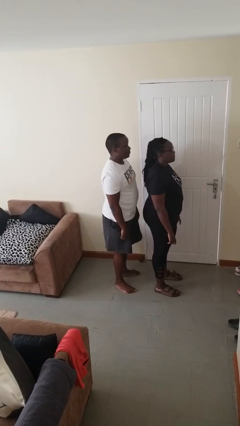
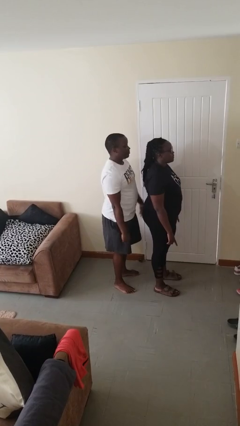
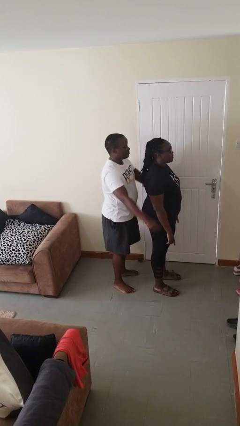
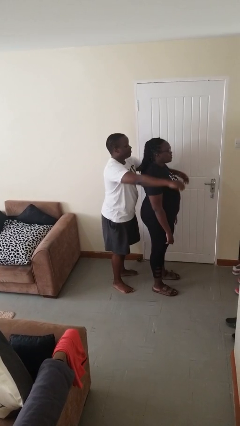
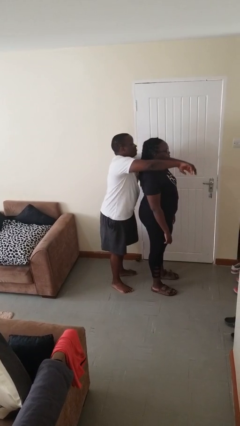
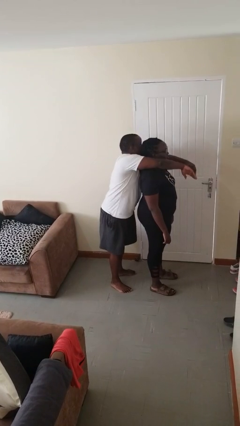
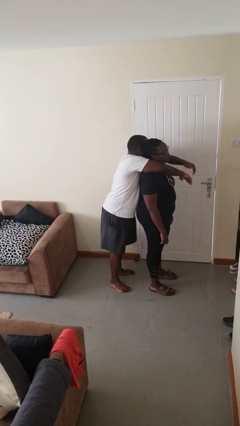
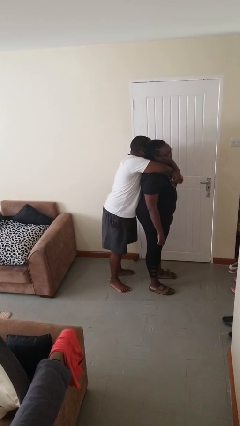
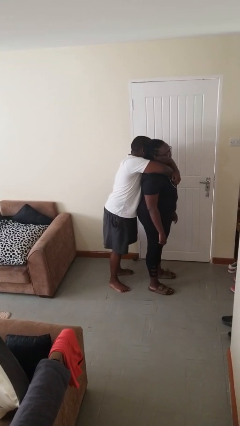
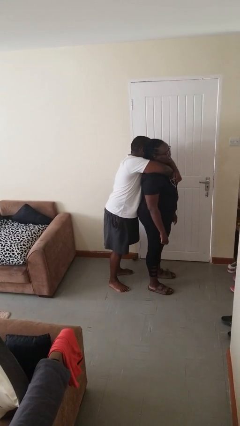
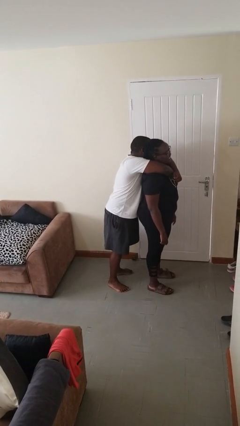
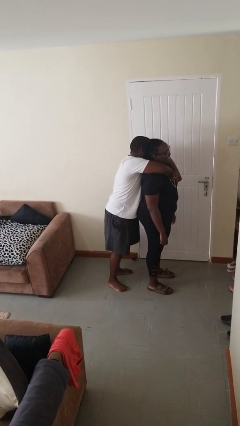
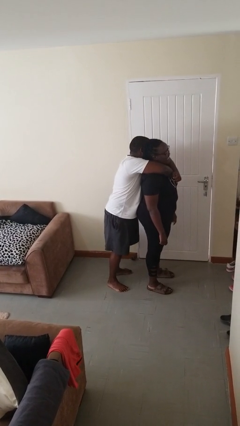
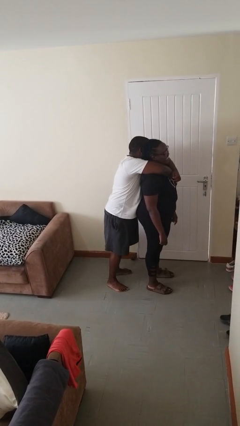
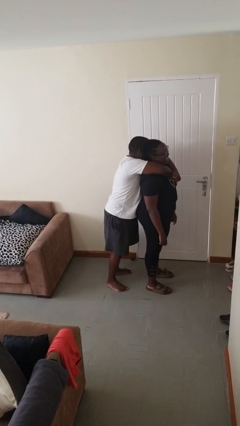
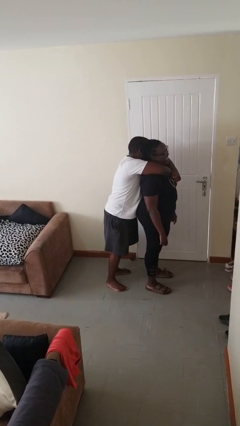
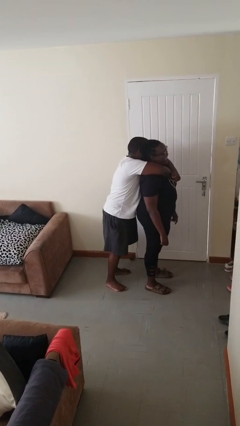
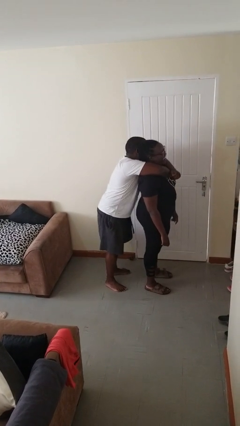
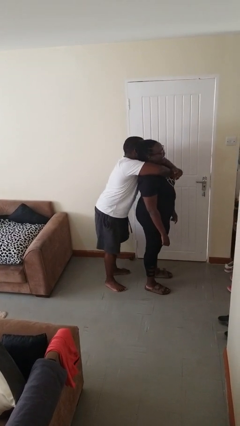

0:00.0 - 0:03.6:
person hugs person from behind

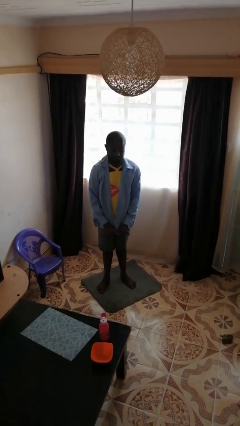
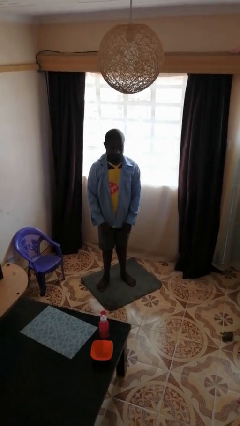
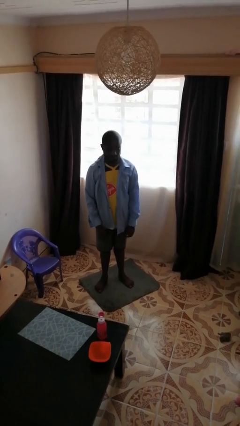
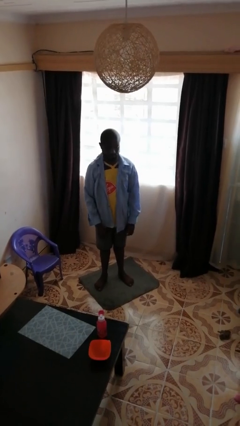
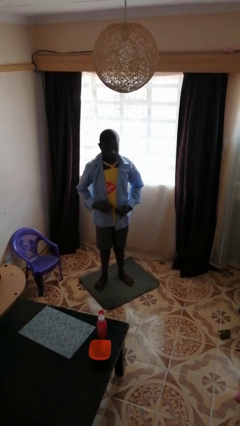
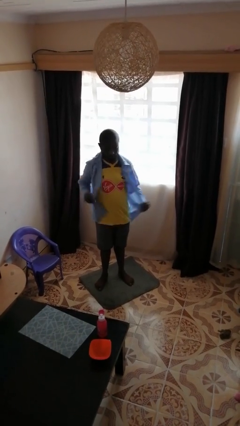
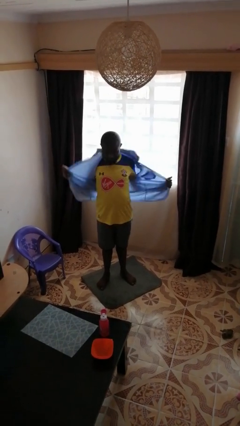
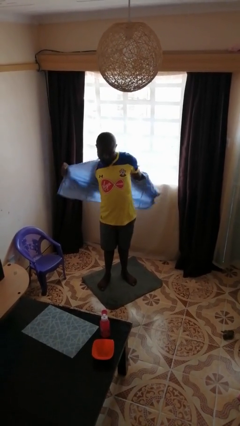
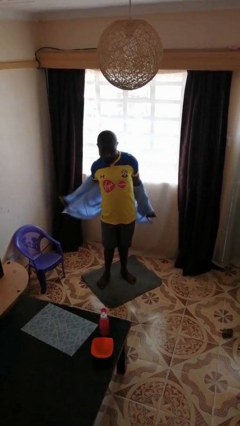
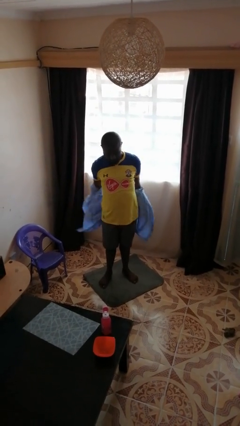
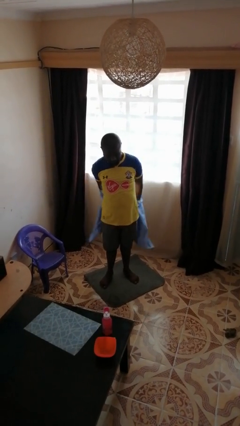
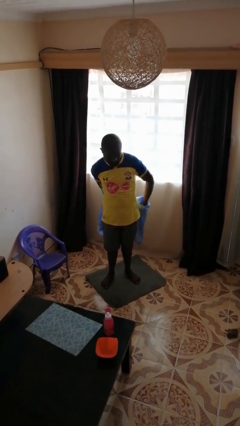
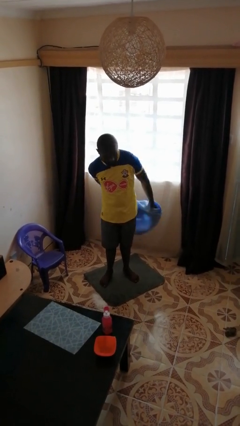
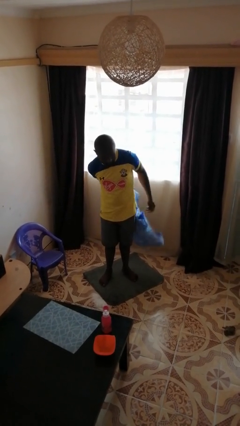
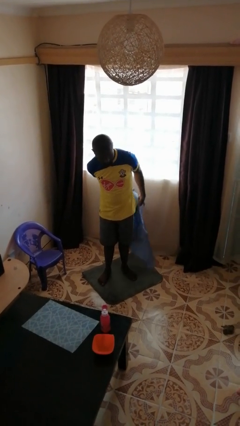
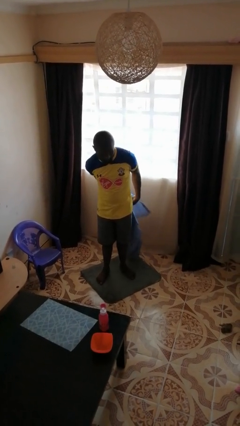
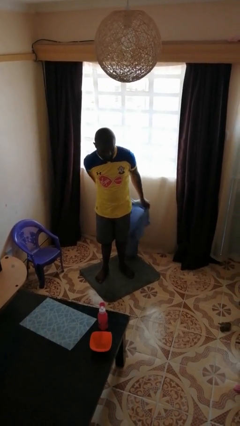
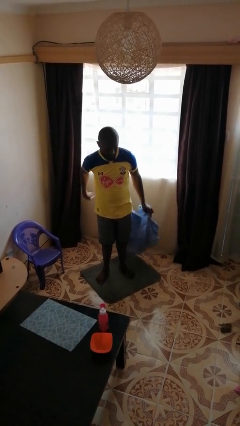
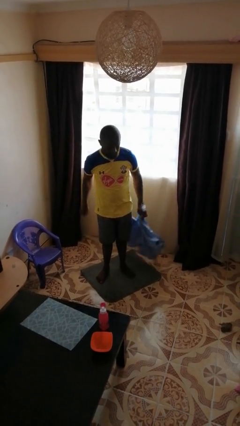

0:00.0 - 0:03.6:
person takes off shirt

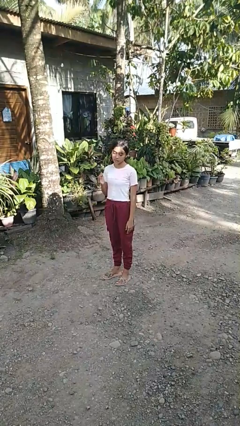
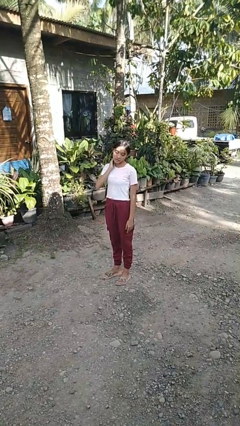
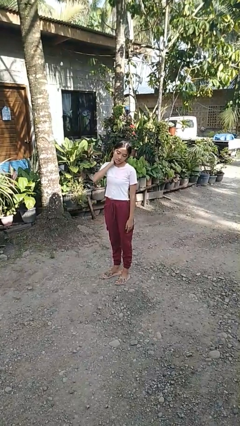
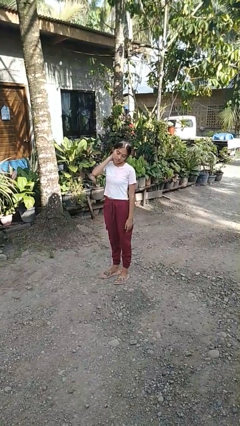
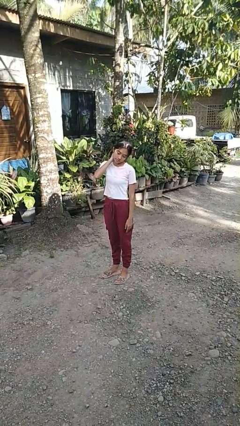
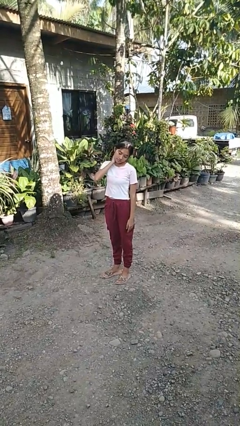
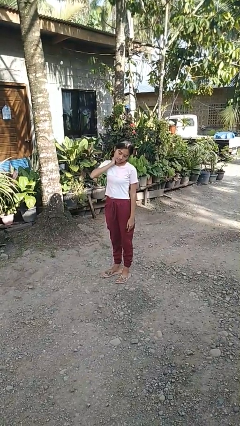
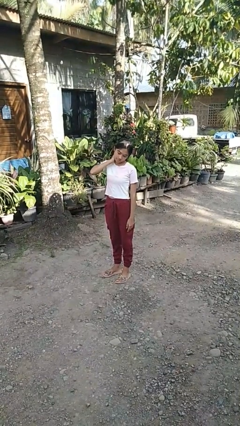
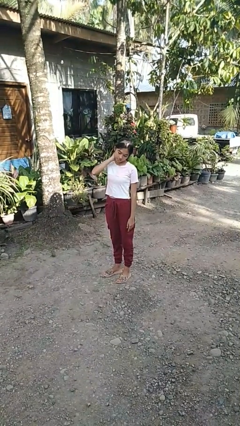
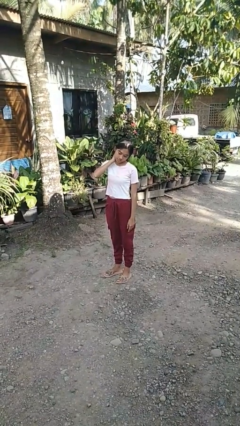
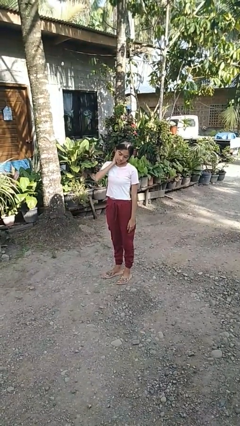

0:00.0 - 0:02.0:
person rubs neck

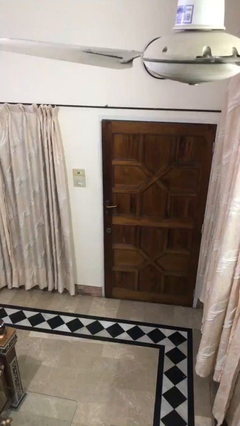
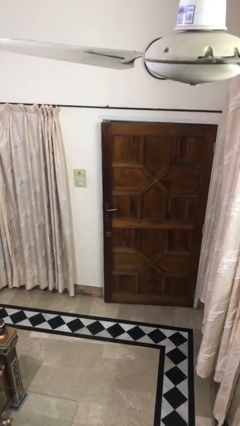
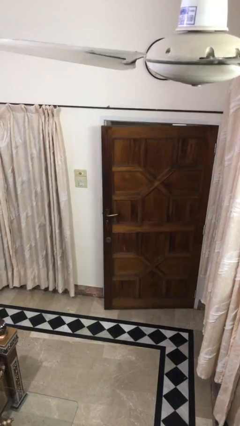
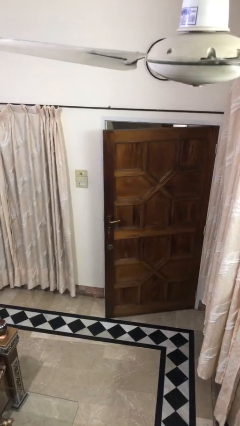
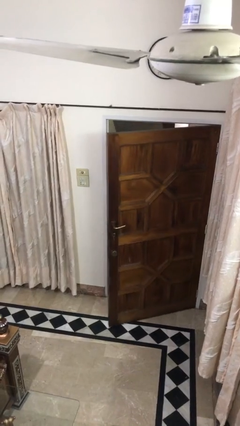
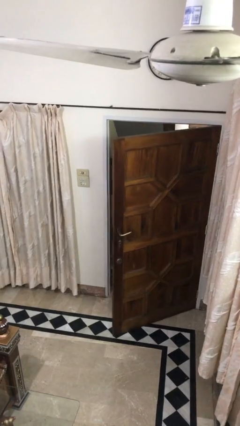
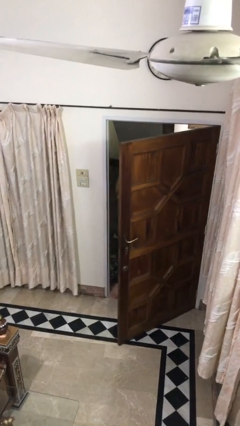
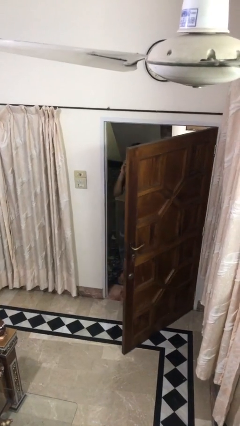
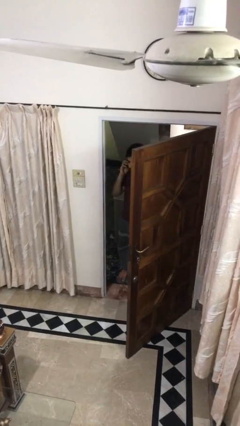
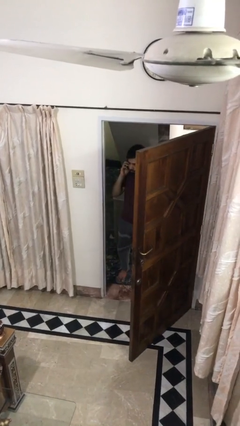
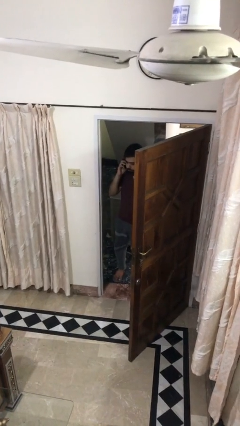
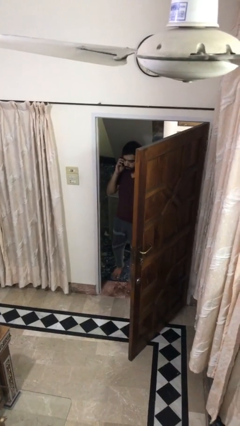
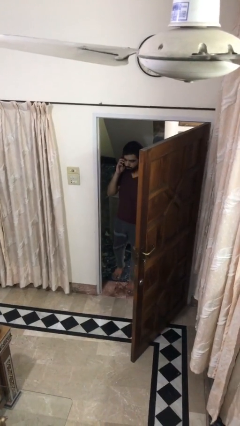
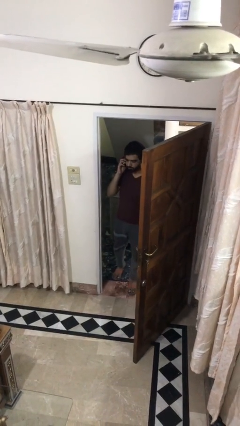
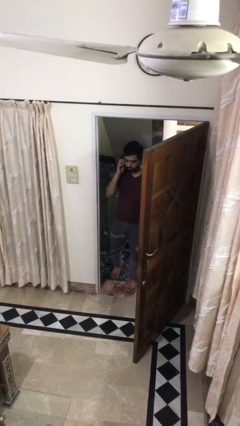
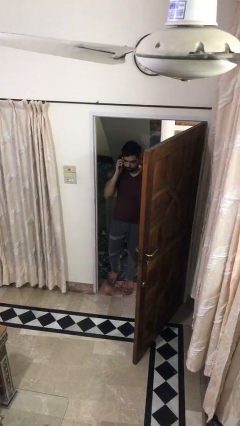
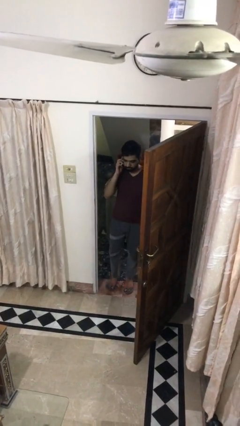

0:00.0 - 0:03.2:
person opens facility door

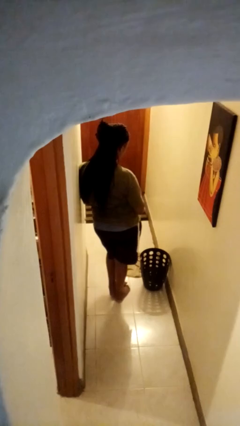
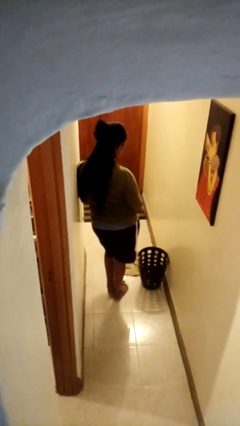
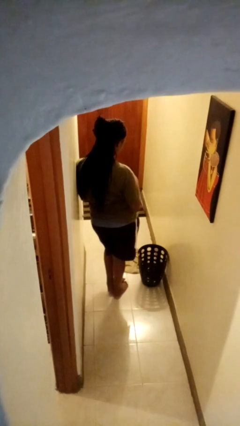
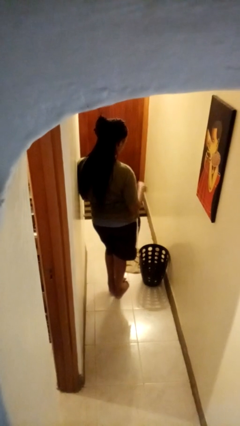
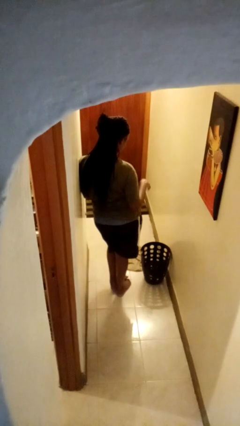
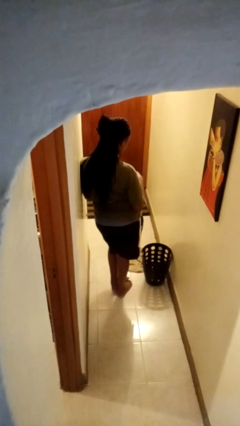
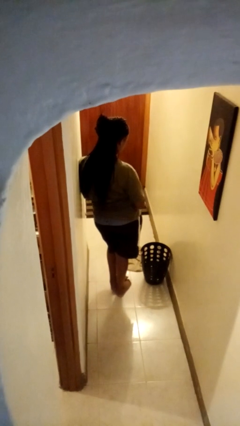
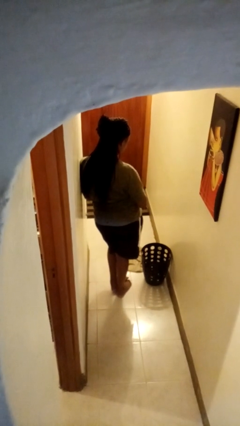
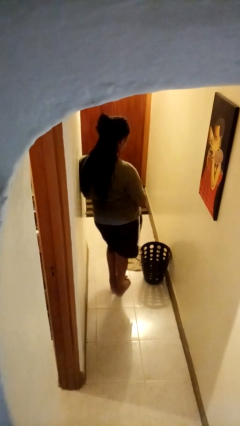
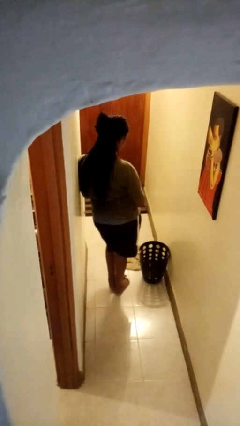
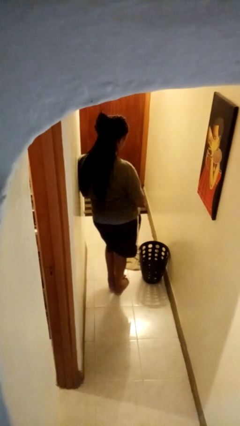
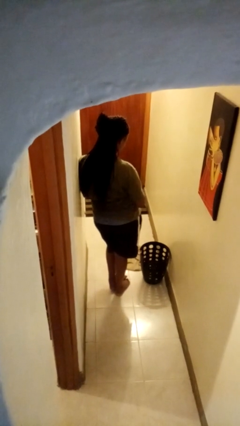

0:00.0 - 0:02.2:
person discards trash

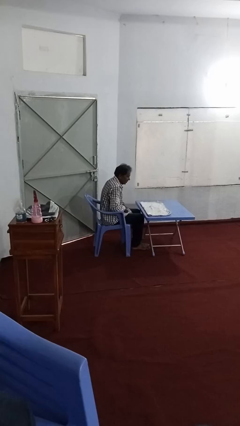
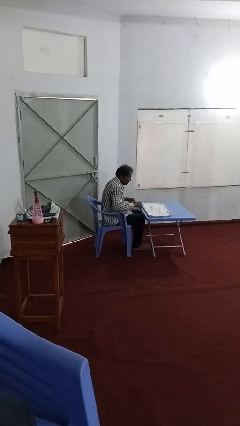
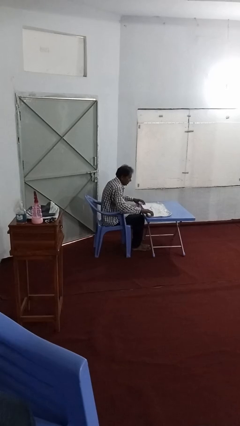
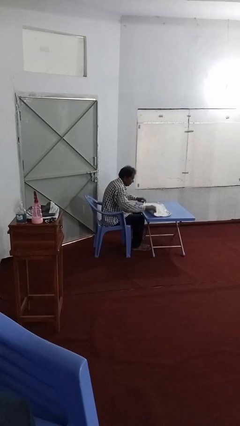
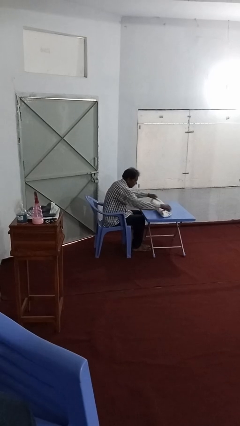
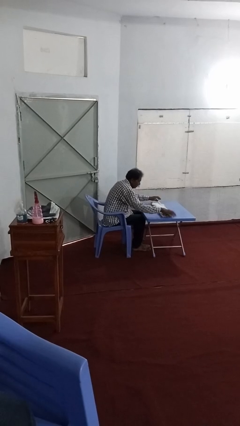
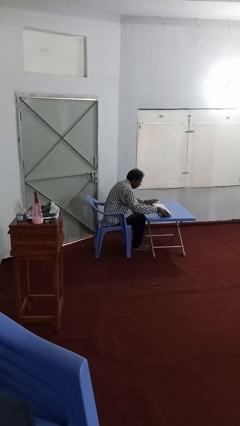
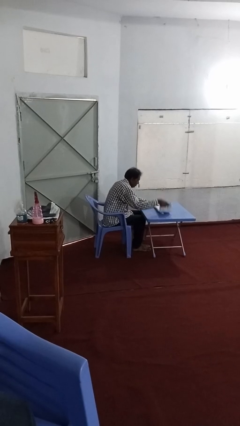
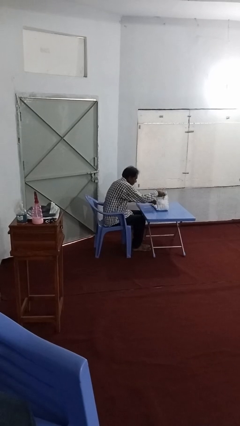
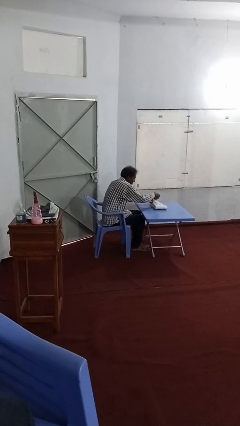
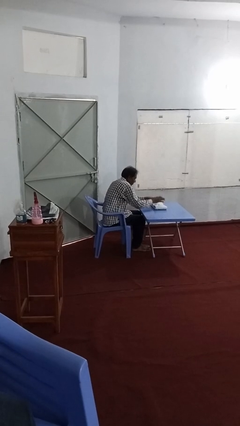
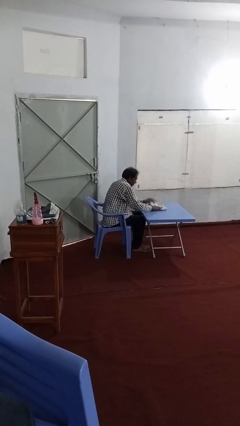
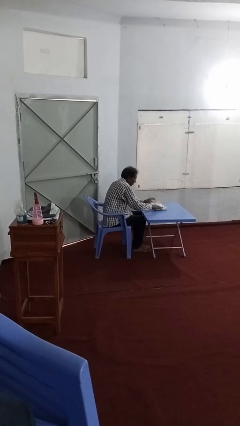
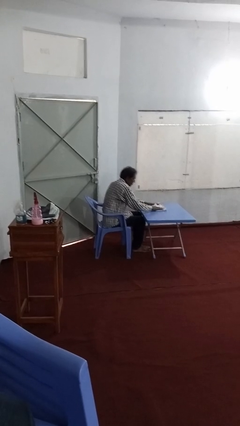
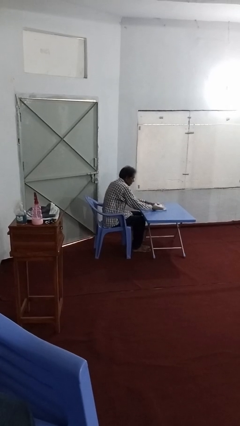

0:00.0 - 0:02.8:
person folds towel
